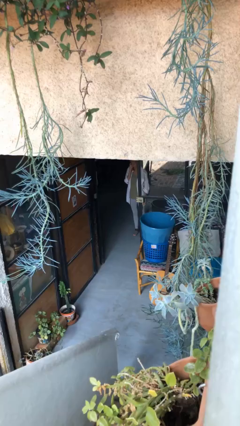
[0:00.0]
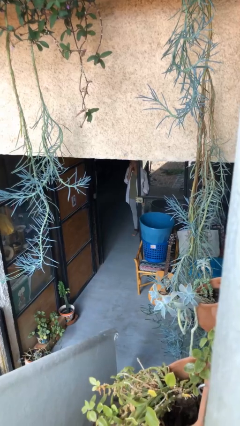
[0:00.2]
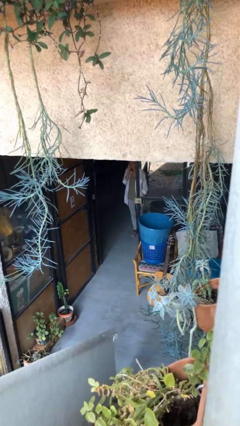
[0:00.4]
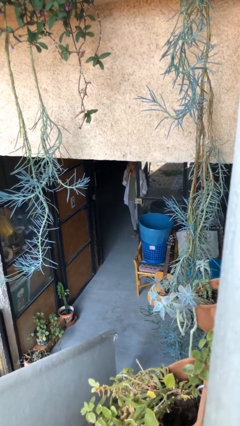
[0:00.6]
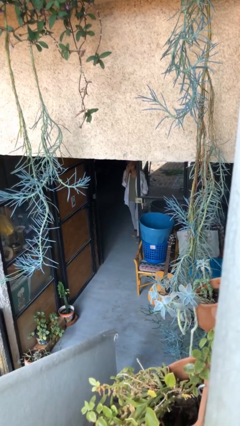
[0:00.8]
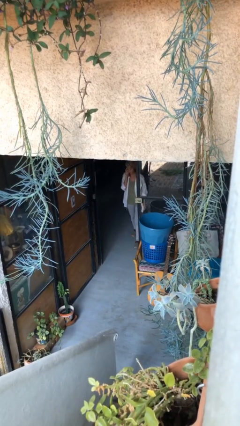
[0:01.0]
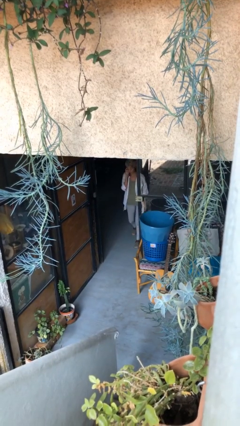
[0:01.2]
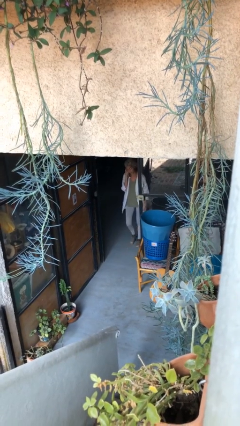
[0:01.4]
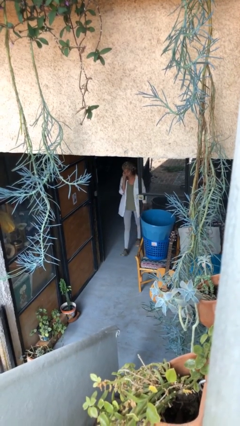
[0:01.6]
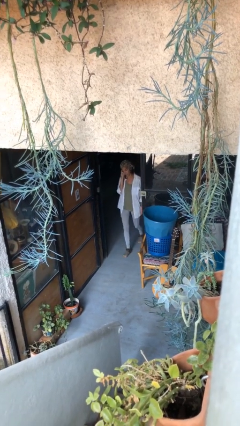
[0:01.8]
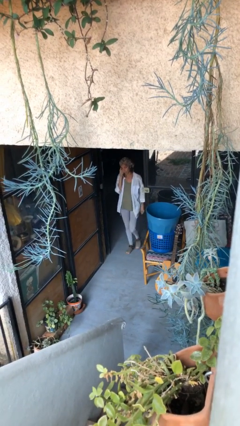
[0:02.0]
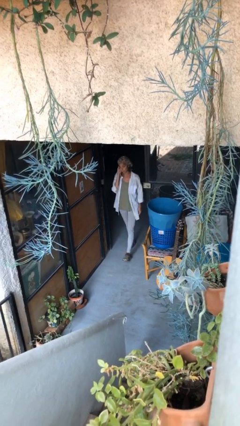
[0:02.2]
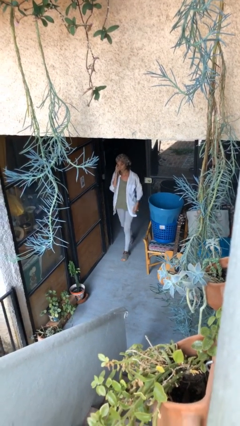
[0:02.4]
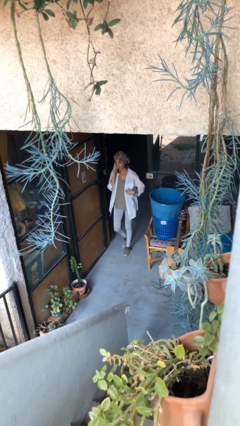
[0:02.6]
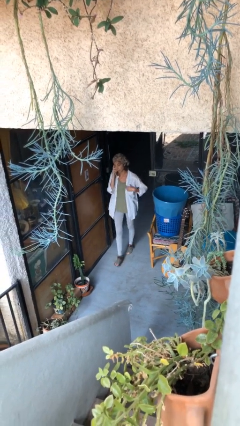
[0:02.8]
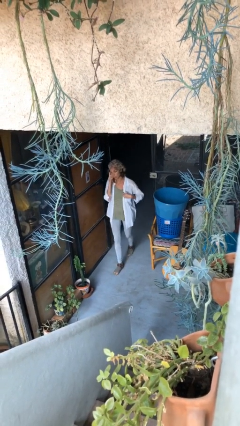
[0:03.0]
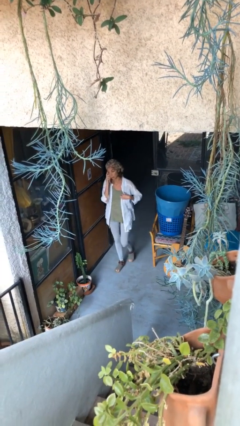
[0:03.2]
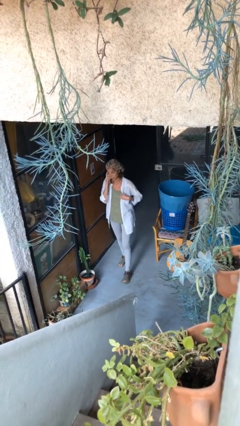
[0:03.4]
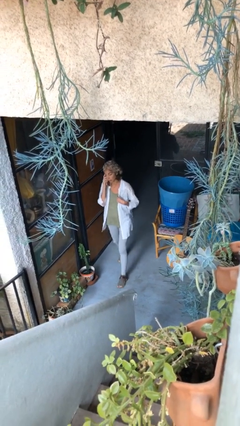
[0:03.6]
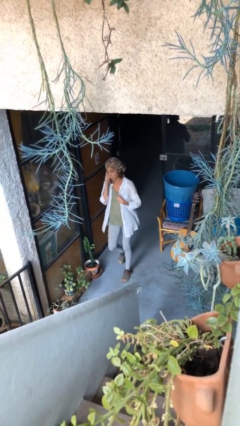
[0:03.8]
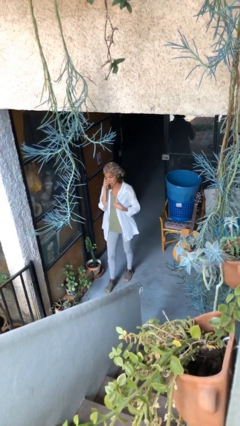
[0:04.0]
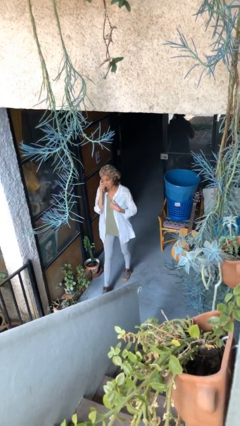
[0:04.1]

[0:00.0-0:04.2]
person enters scene through structure

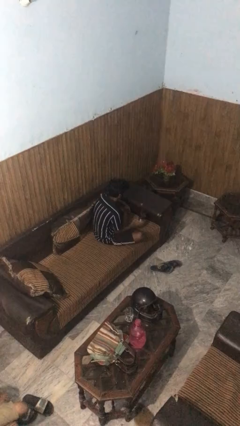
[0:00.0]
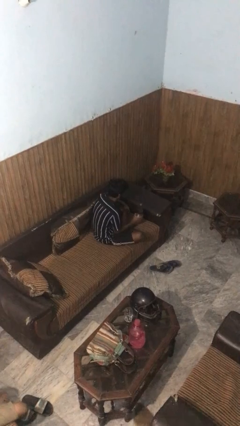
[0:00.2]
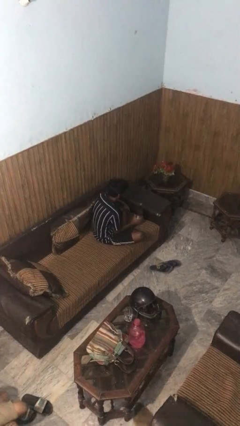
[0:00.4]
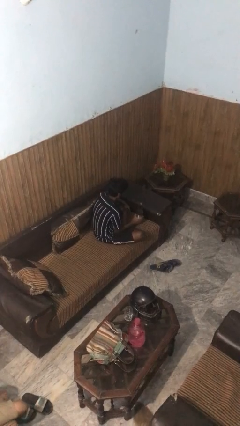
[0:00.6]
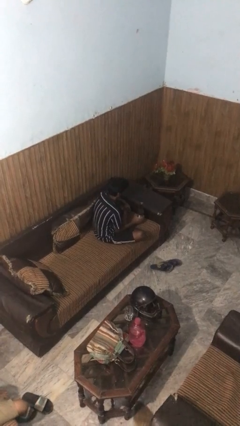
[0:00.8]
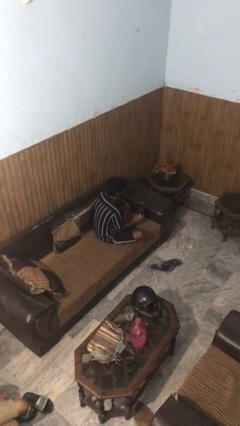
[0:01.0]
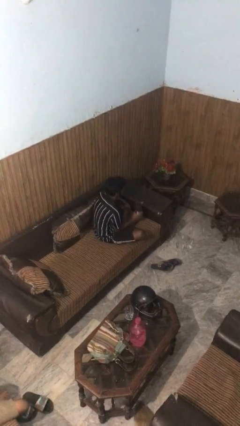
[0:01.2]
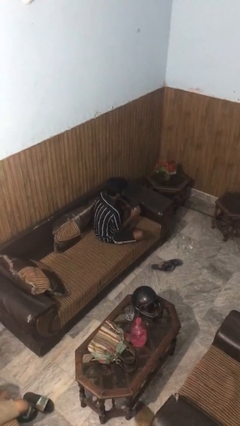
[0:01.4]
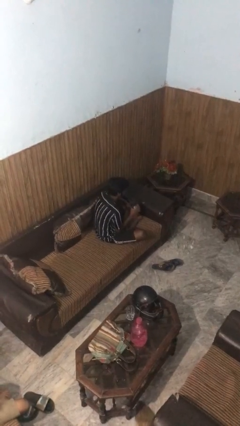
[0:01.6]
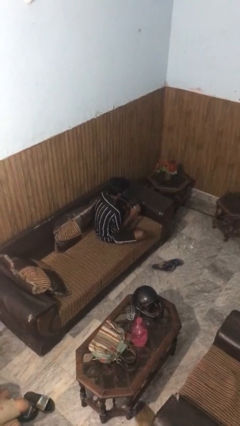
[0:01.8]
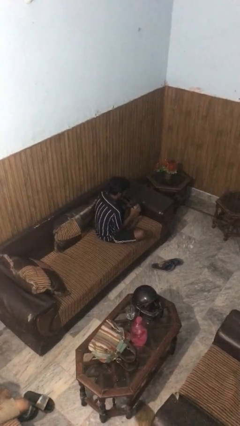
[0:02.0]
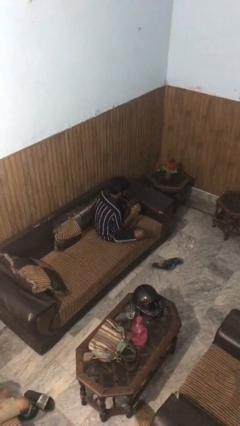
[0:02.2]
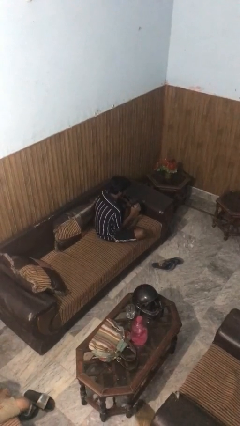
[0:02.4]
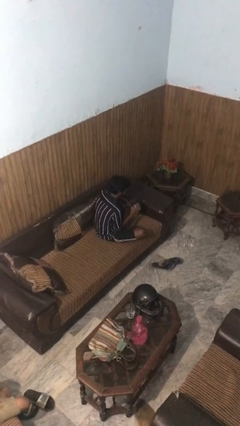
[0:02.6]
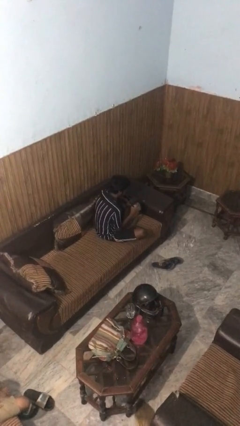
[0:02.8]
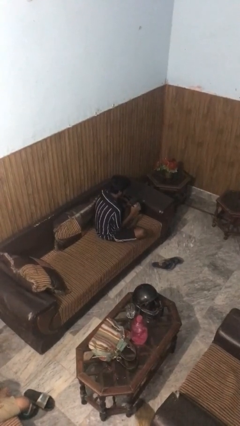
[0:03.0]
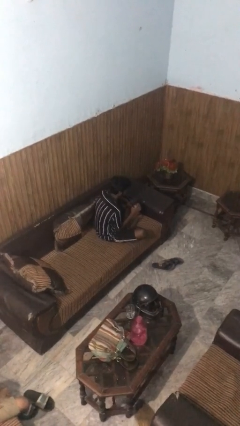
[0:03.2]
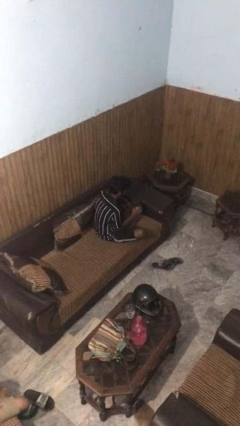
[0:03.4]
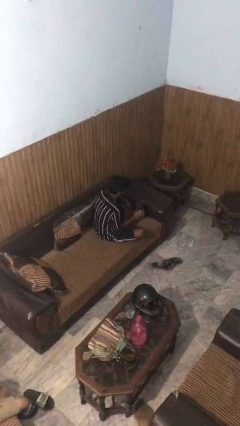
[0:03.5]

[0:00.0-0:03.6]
person drinks from straw

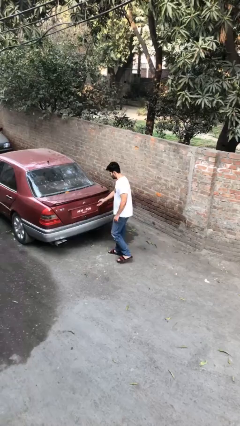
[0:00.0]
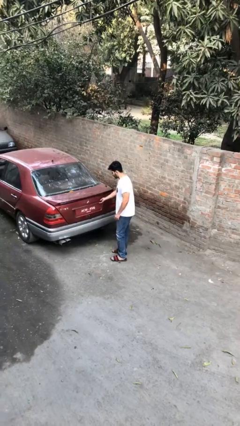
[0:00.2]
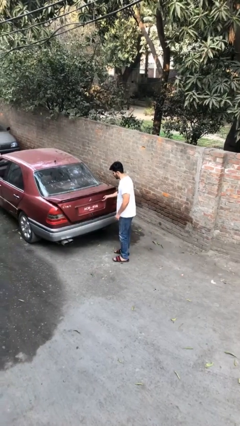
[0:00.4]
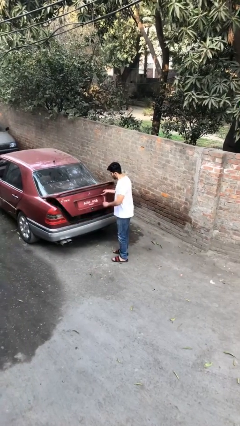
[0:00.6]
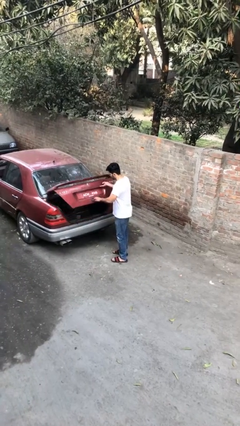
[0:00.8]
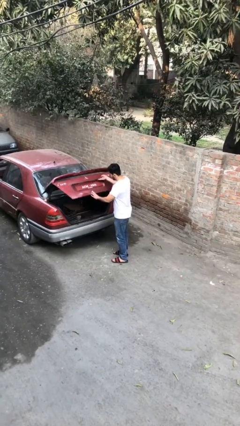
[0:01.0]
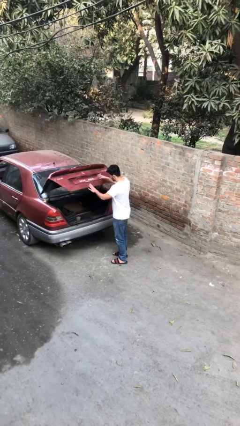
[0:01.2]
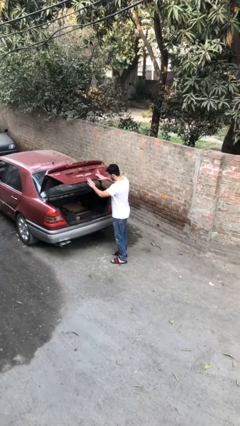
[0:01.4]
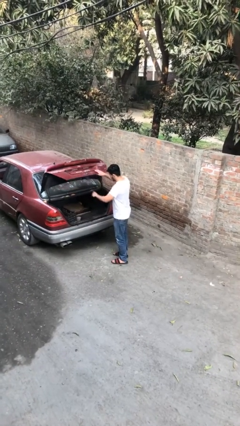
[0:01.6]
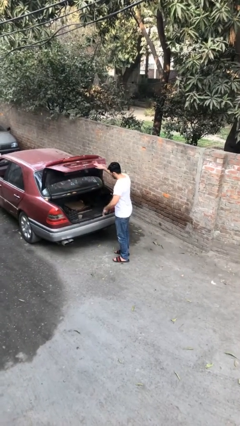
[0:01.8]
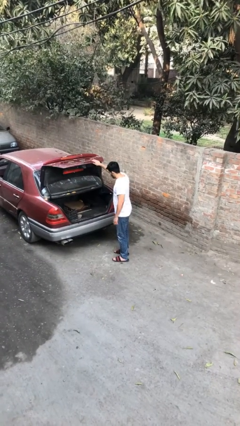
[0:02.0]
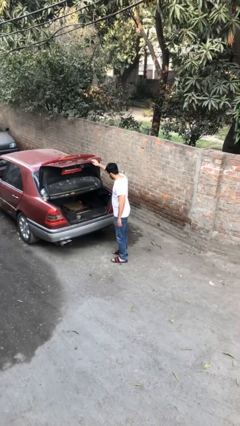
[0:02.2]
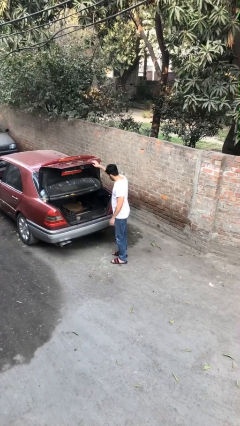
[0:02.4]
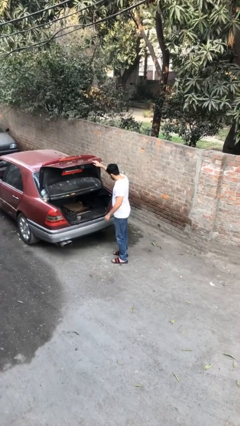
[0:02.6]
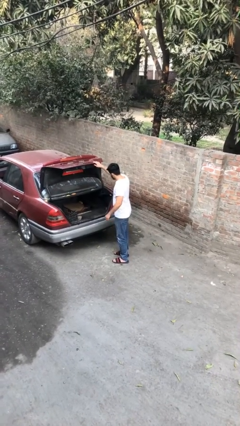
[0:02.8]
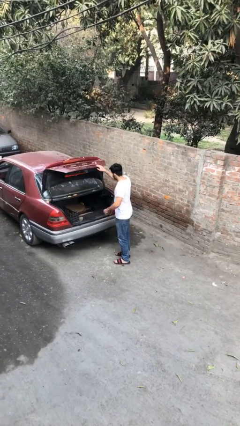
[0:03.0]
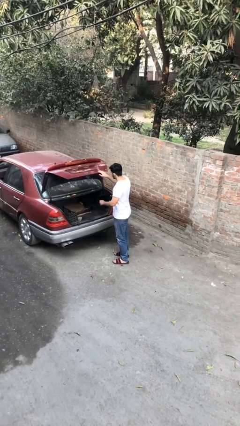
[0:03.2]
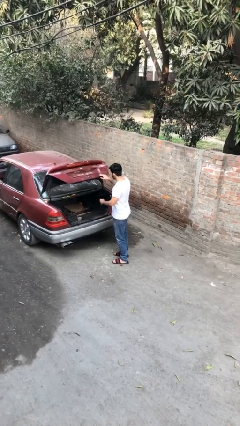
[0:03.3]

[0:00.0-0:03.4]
person opens car trunk

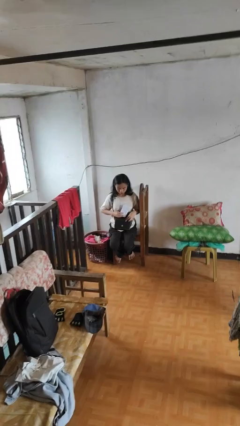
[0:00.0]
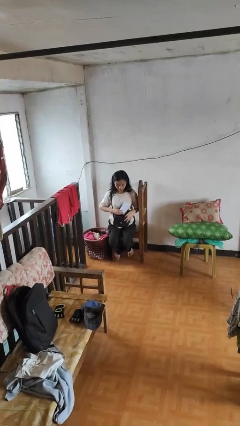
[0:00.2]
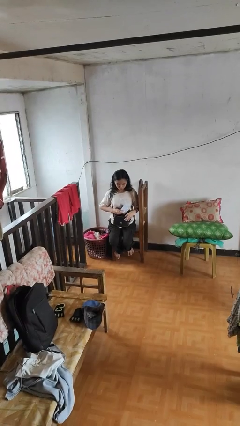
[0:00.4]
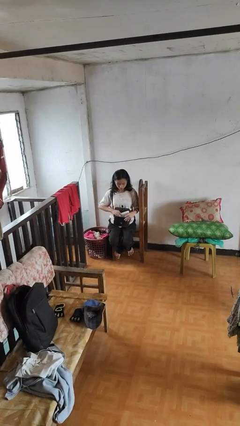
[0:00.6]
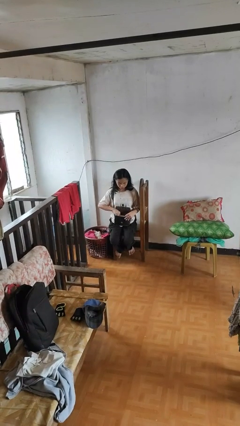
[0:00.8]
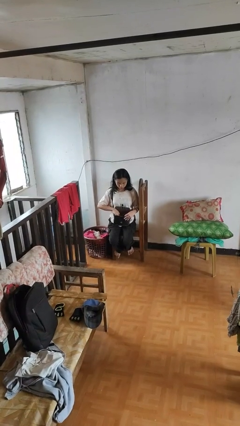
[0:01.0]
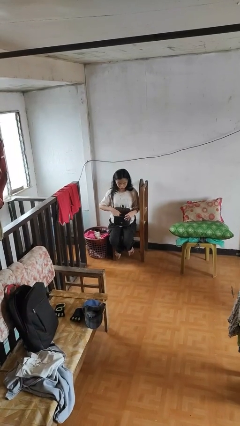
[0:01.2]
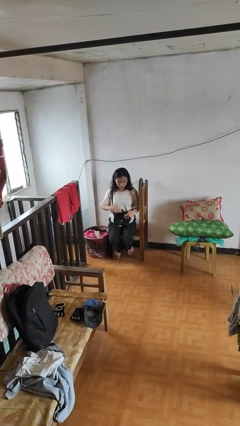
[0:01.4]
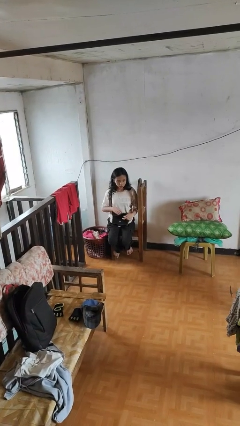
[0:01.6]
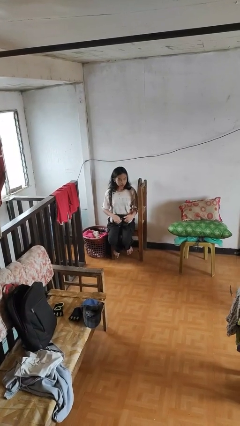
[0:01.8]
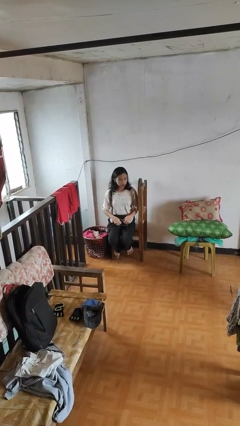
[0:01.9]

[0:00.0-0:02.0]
person puts object into purse

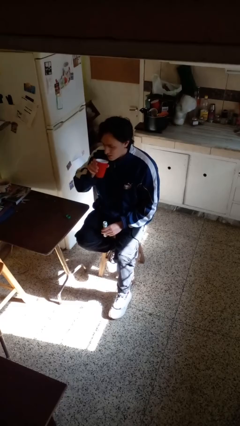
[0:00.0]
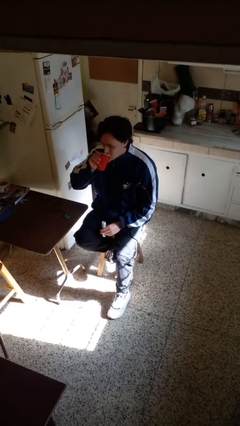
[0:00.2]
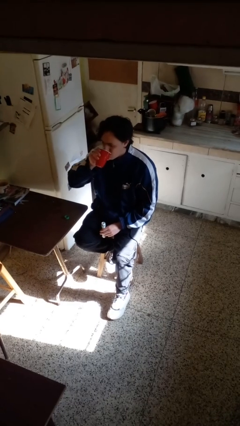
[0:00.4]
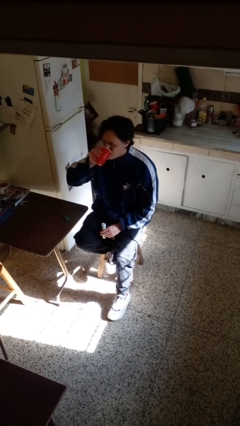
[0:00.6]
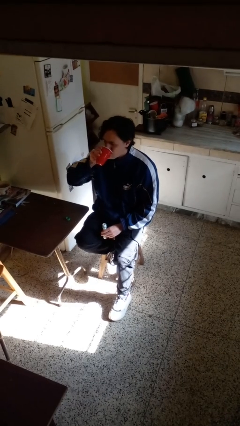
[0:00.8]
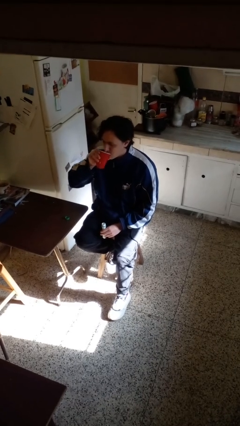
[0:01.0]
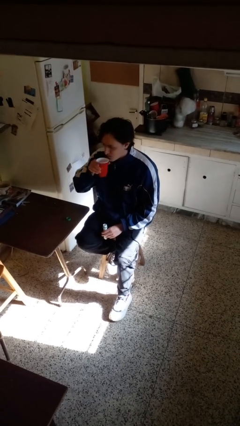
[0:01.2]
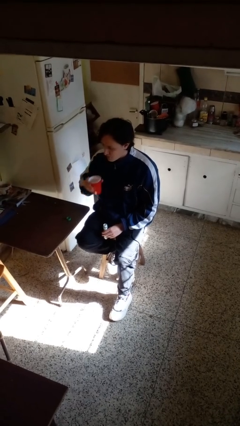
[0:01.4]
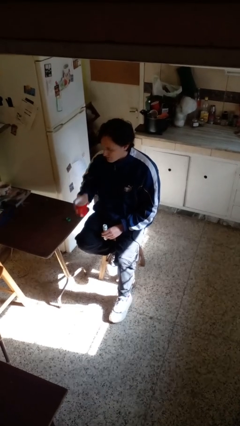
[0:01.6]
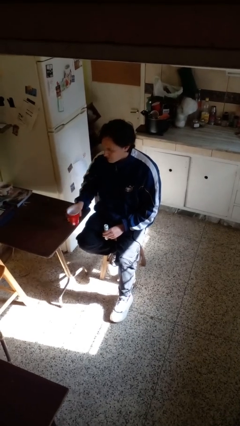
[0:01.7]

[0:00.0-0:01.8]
person drinks from cup

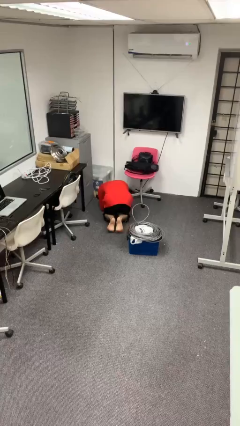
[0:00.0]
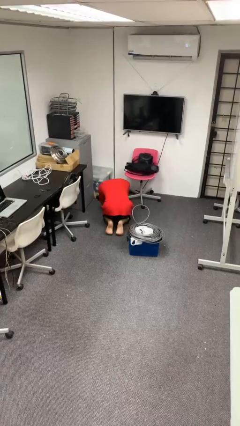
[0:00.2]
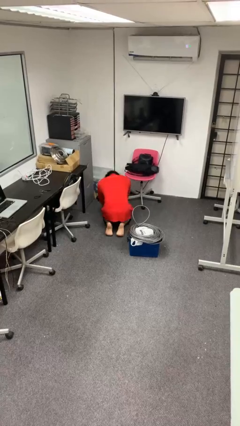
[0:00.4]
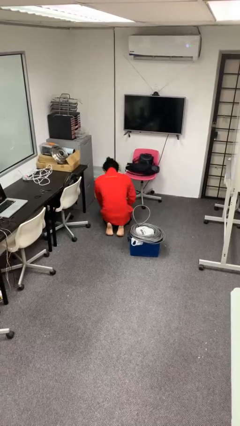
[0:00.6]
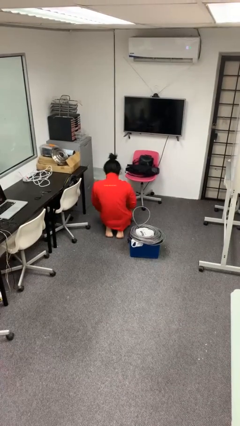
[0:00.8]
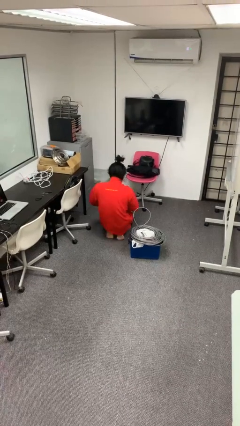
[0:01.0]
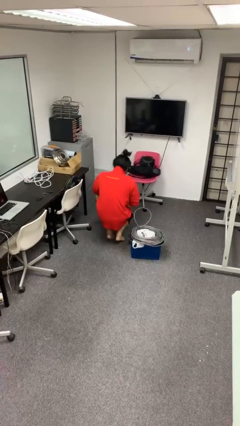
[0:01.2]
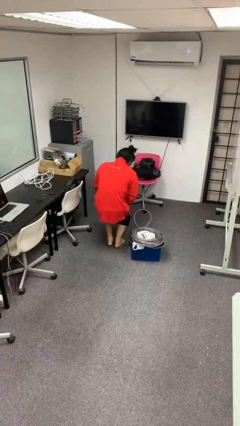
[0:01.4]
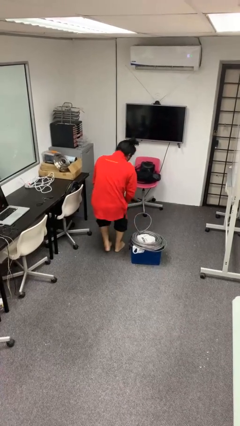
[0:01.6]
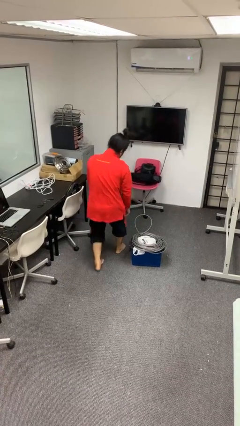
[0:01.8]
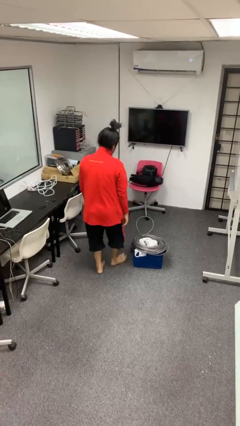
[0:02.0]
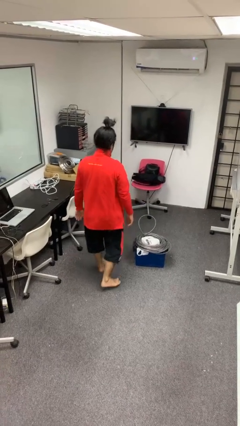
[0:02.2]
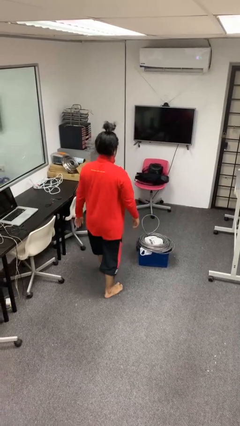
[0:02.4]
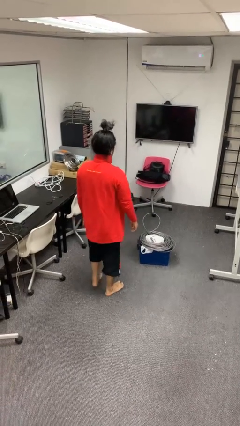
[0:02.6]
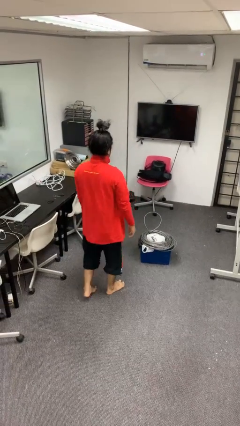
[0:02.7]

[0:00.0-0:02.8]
person stands up from floor
